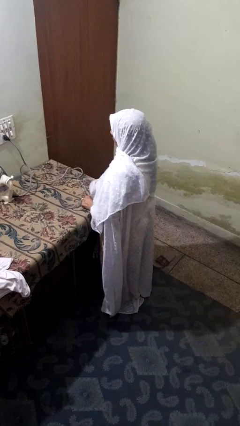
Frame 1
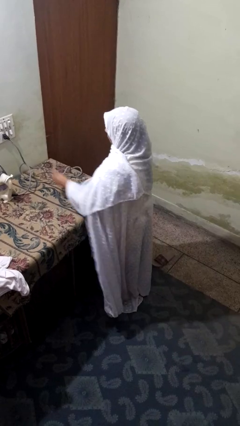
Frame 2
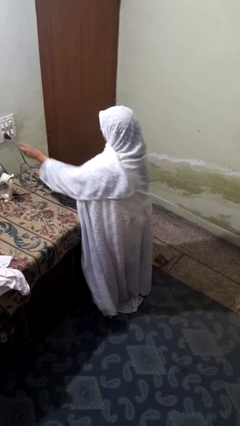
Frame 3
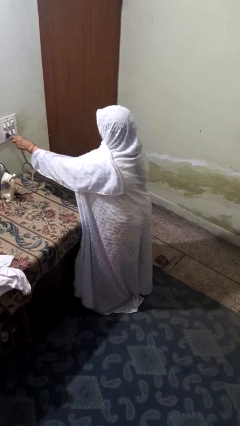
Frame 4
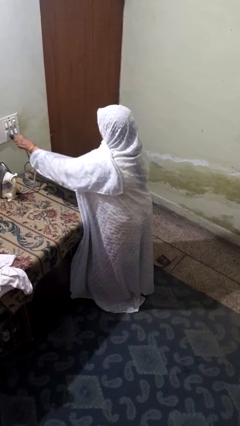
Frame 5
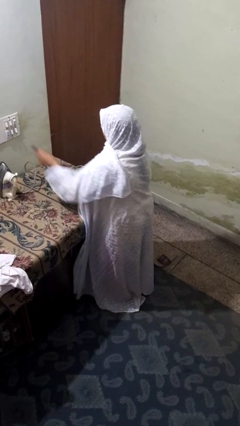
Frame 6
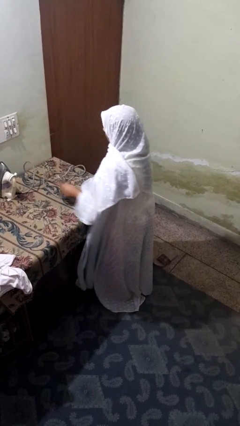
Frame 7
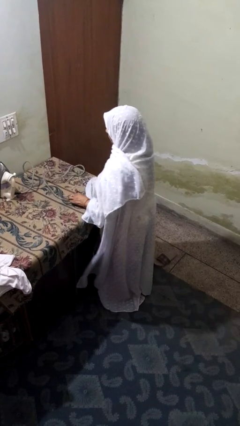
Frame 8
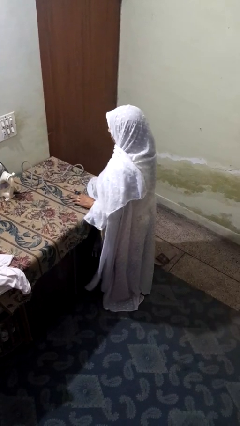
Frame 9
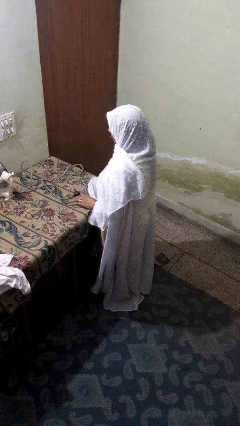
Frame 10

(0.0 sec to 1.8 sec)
person unplugs from electrical socket

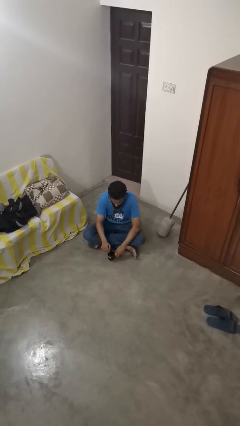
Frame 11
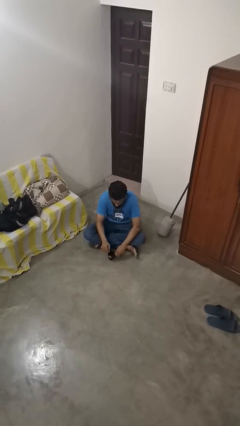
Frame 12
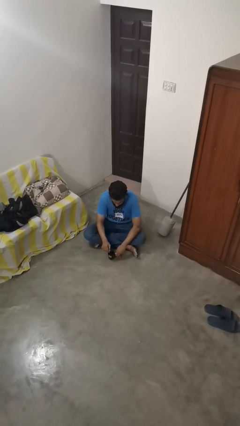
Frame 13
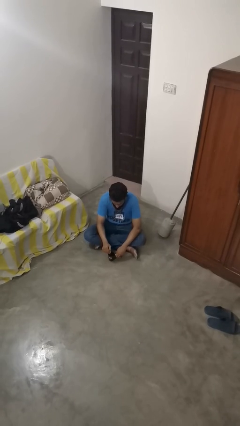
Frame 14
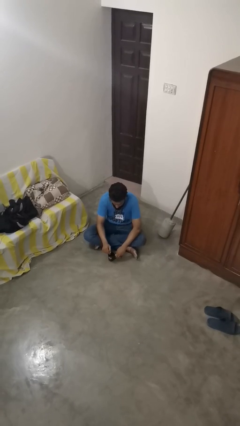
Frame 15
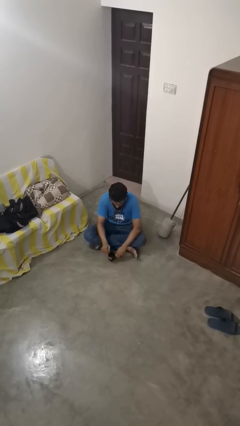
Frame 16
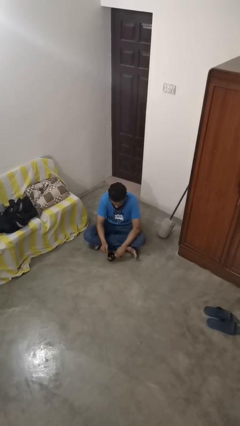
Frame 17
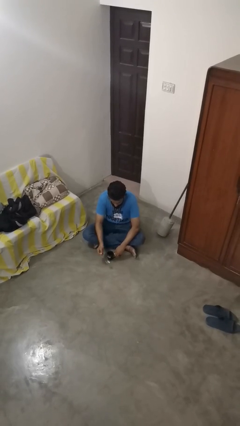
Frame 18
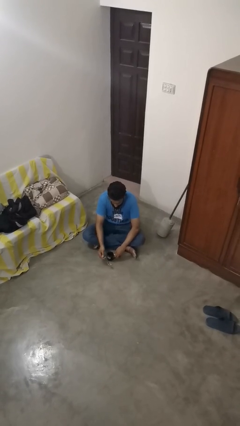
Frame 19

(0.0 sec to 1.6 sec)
person stirs mug

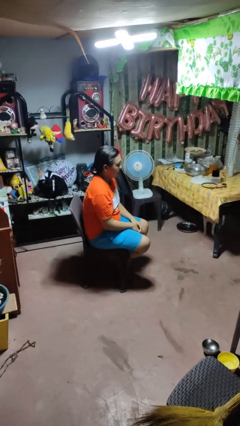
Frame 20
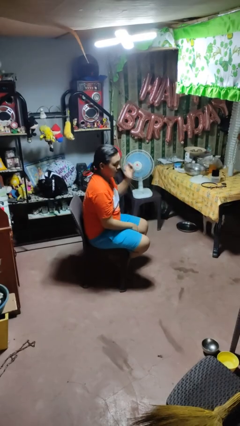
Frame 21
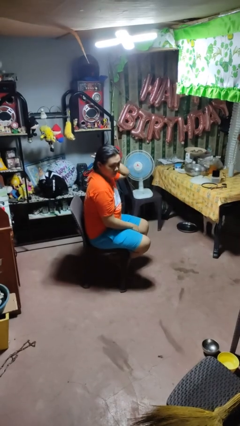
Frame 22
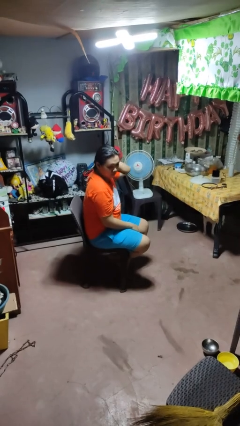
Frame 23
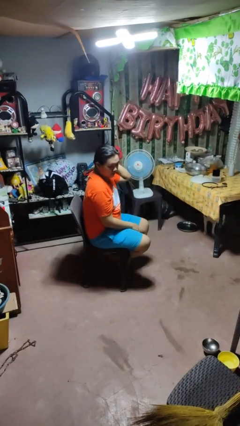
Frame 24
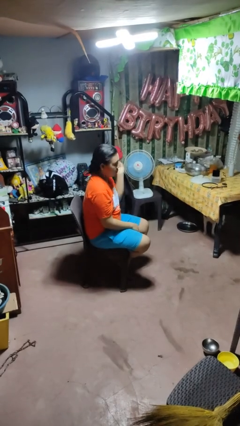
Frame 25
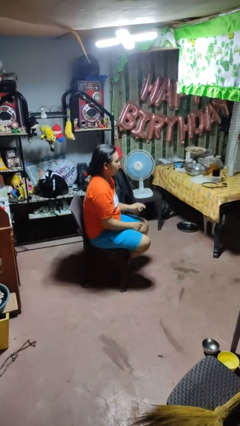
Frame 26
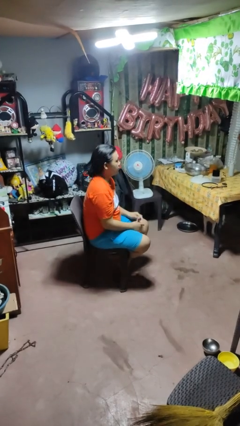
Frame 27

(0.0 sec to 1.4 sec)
person takes off hairtie

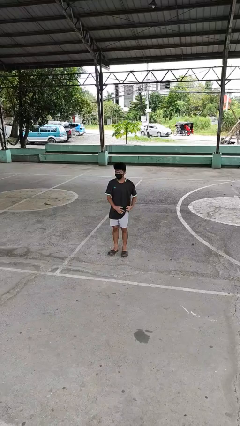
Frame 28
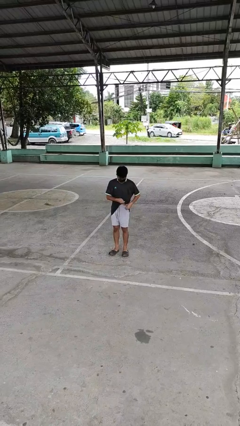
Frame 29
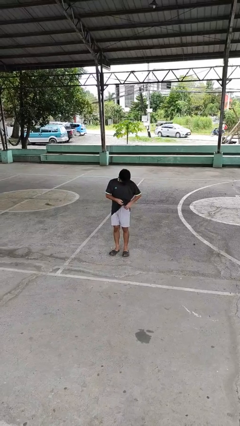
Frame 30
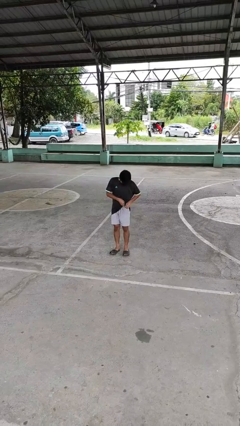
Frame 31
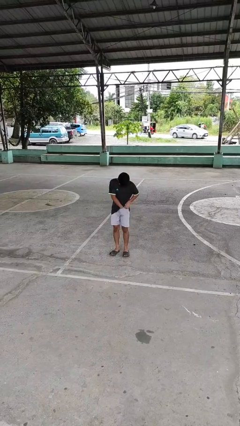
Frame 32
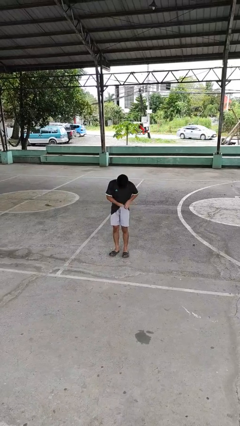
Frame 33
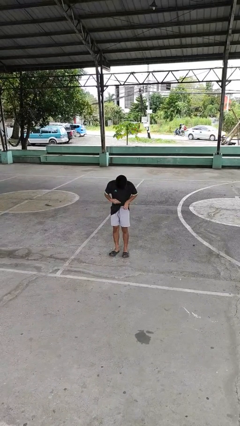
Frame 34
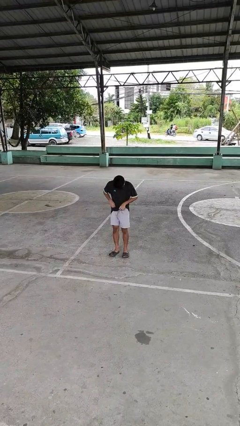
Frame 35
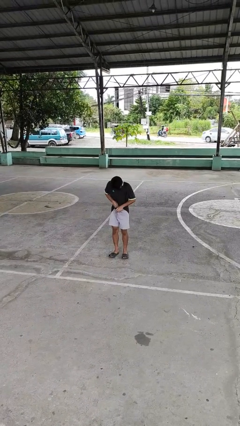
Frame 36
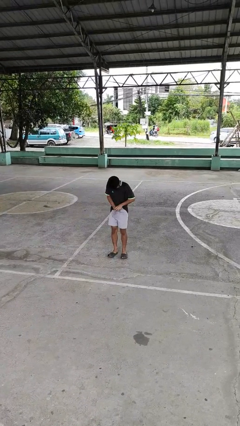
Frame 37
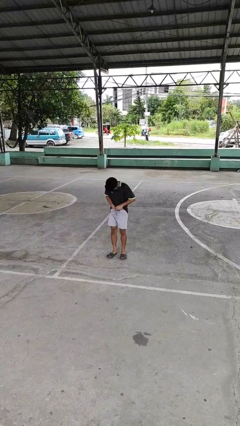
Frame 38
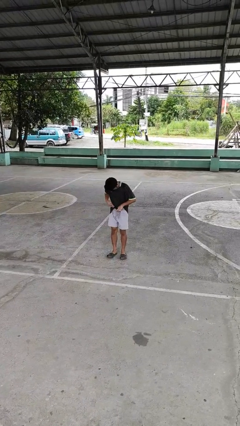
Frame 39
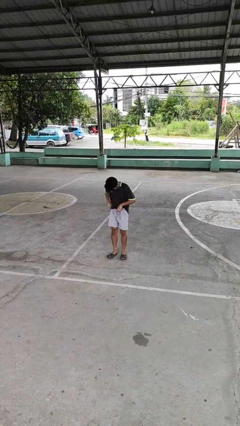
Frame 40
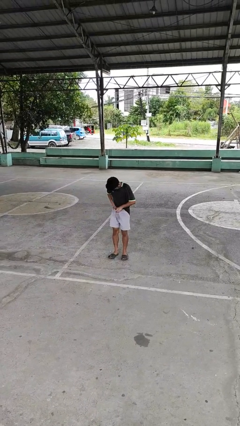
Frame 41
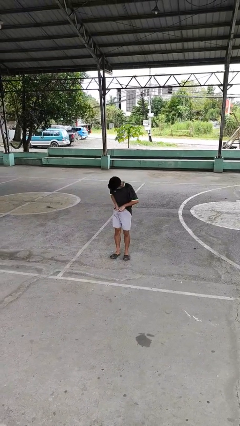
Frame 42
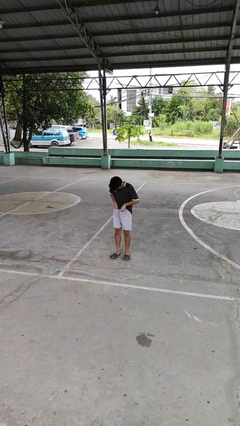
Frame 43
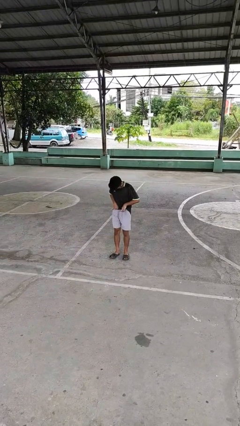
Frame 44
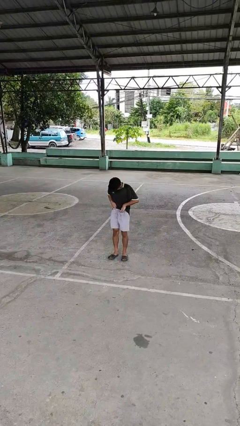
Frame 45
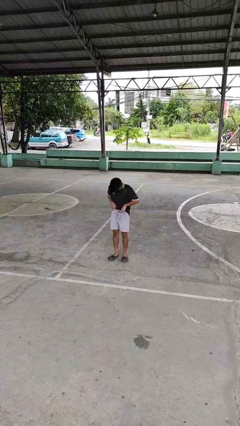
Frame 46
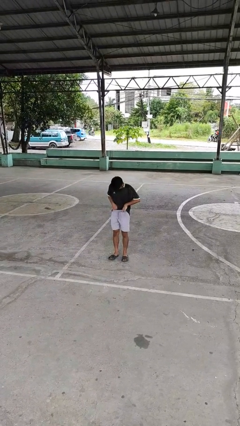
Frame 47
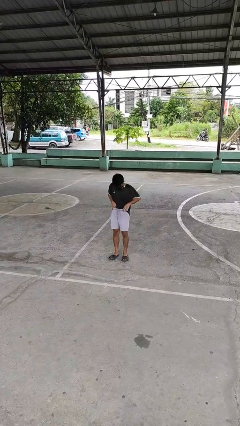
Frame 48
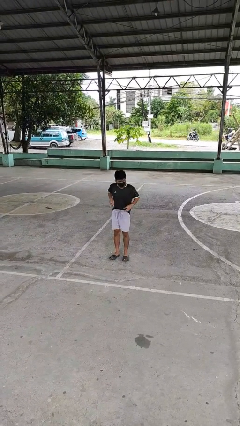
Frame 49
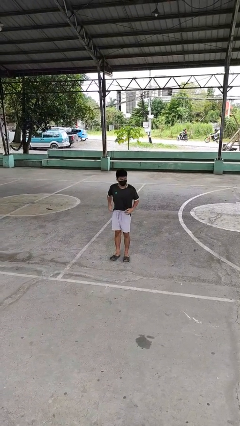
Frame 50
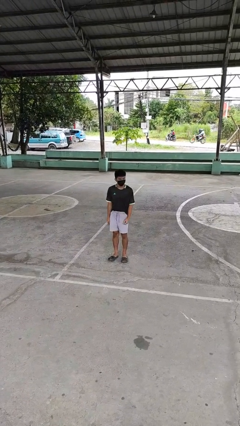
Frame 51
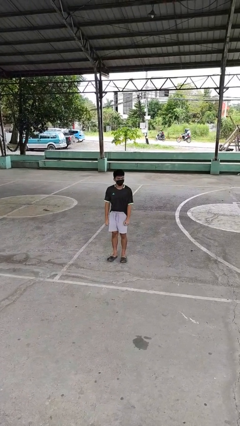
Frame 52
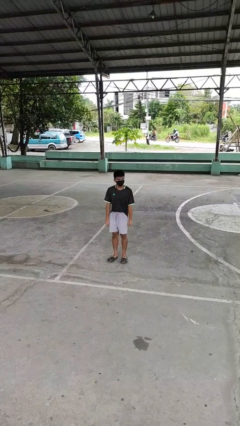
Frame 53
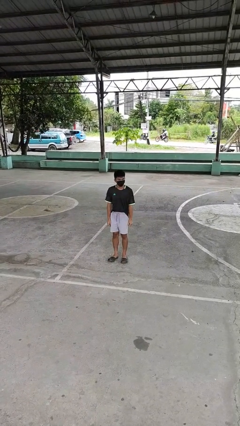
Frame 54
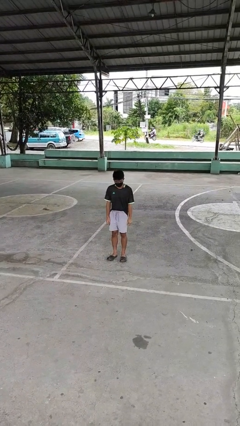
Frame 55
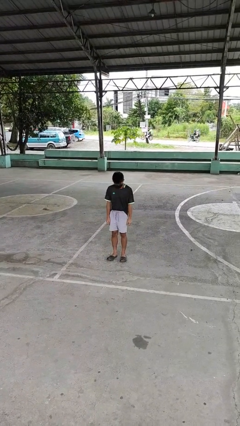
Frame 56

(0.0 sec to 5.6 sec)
person tucks in shirt

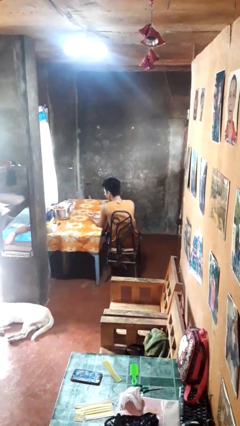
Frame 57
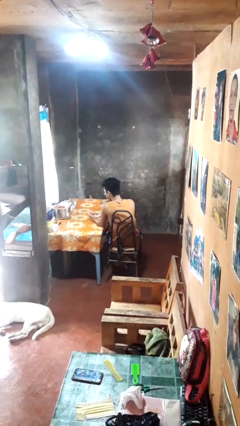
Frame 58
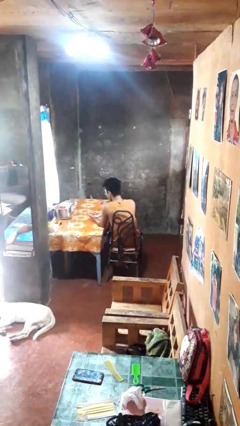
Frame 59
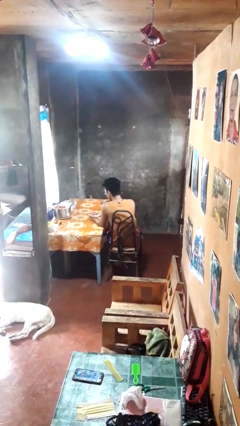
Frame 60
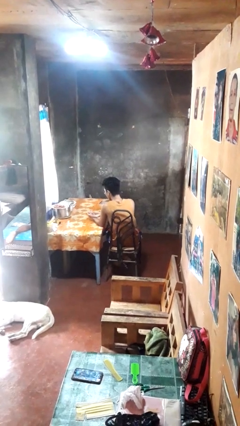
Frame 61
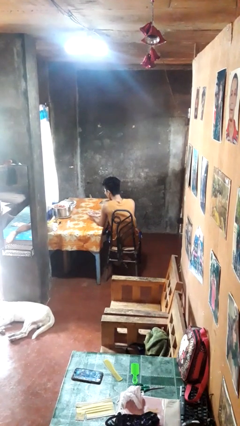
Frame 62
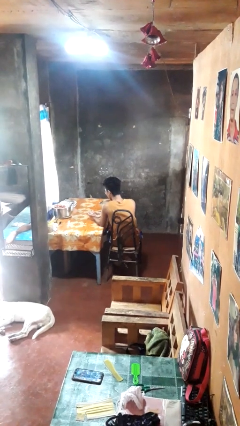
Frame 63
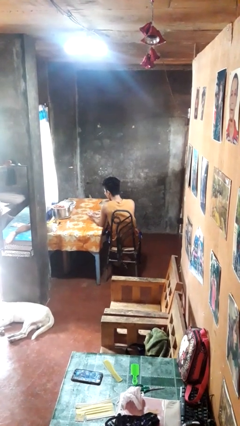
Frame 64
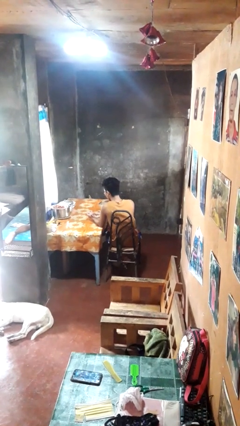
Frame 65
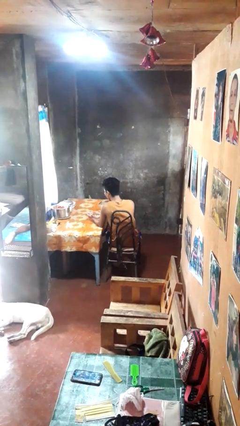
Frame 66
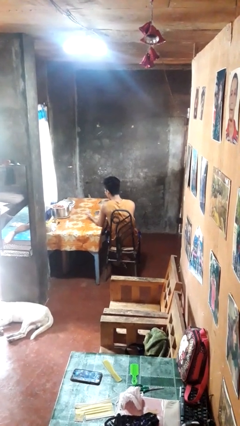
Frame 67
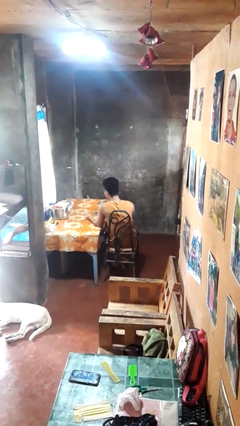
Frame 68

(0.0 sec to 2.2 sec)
person clips fingernails

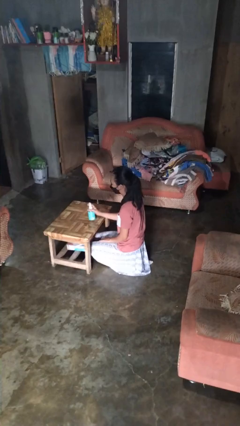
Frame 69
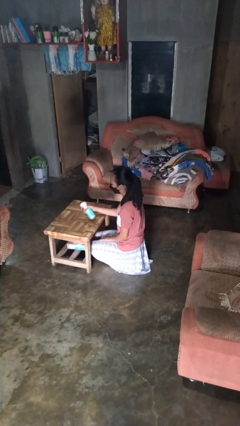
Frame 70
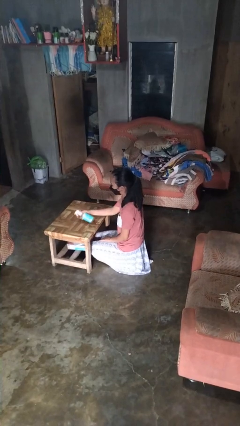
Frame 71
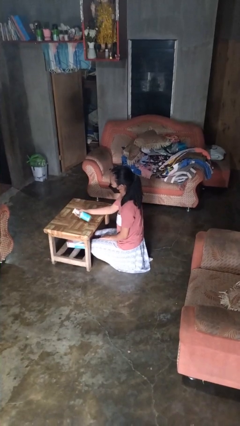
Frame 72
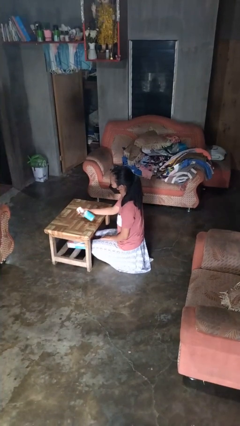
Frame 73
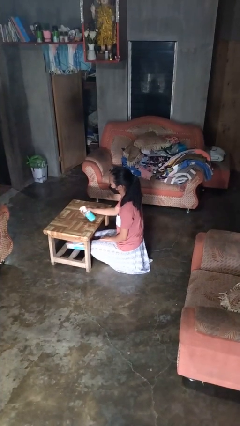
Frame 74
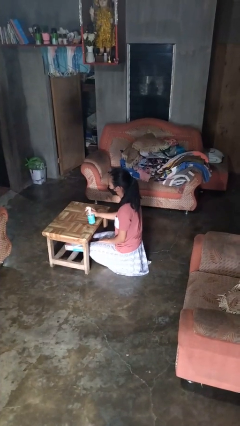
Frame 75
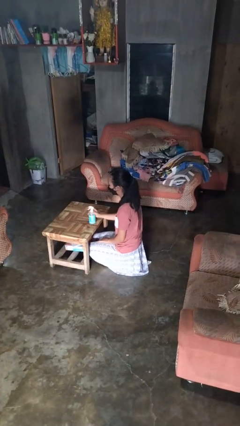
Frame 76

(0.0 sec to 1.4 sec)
person sprays from bottle

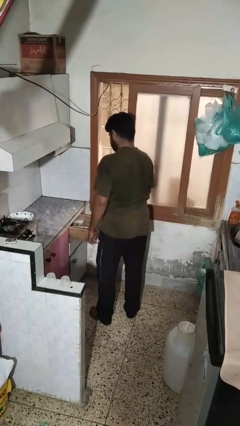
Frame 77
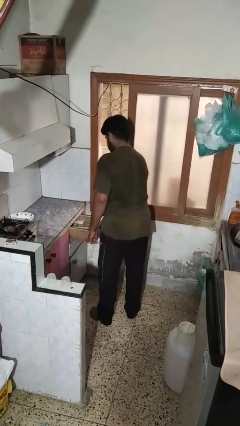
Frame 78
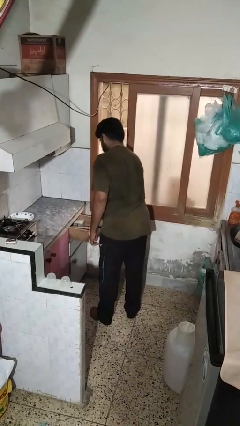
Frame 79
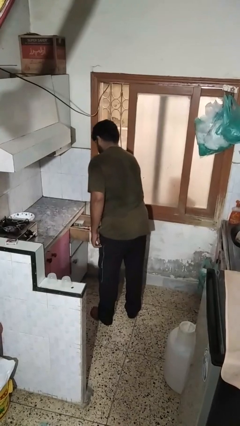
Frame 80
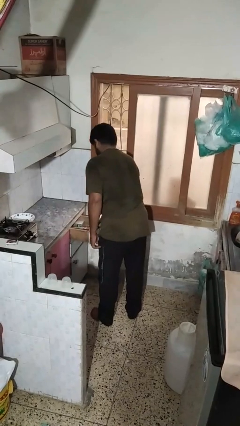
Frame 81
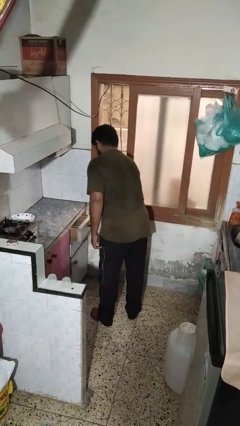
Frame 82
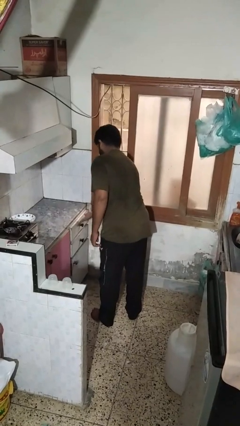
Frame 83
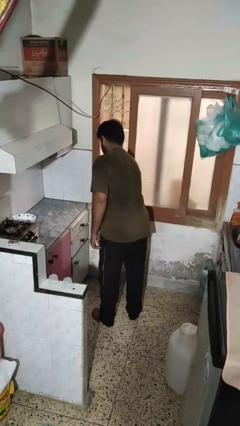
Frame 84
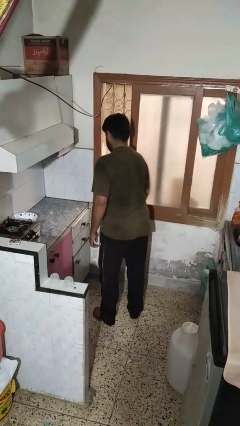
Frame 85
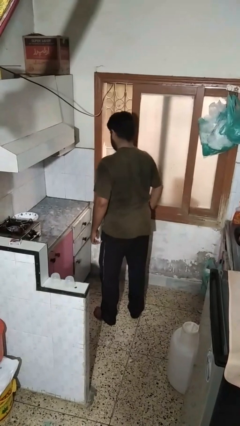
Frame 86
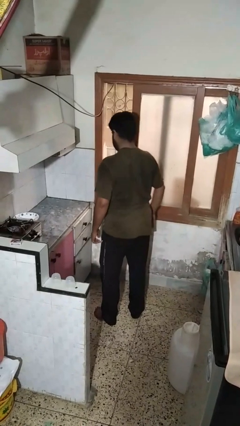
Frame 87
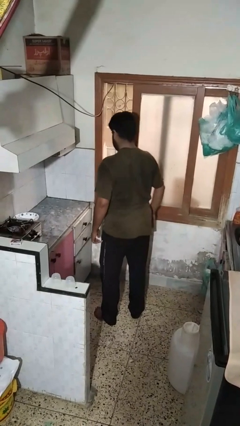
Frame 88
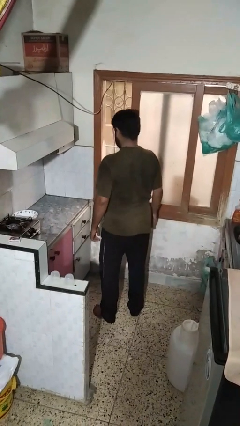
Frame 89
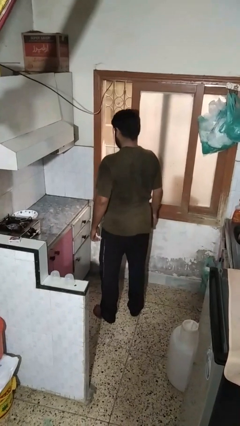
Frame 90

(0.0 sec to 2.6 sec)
person closes kitchen drawer

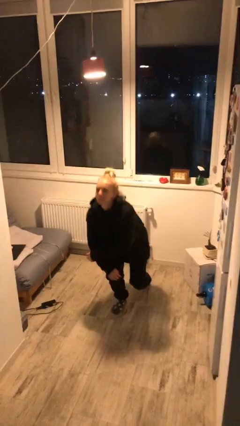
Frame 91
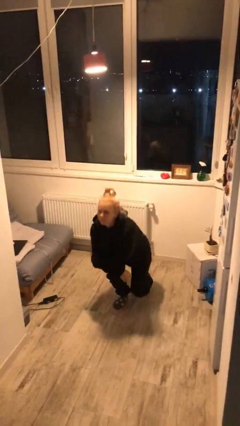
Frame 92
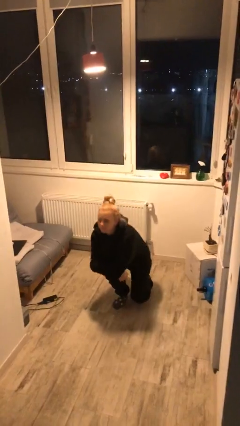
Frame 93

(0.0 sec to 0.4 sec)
person sits down
